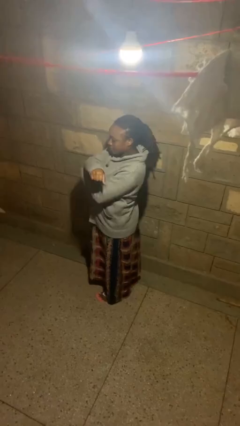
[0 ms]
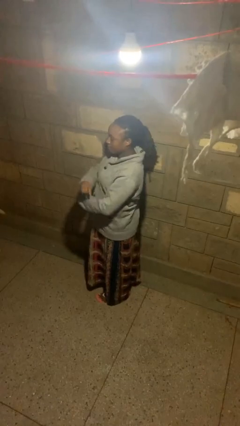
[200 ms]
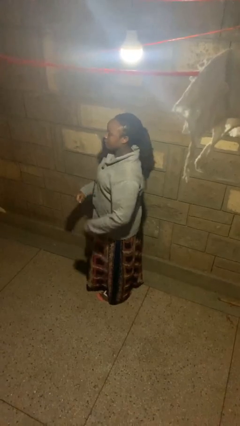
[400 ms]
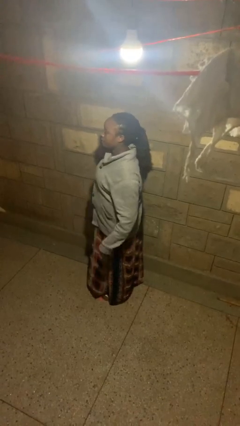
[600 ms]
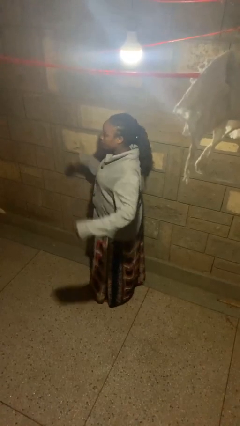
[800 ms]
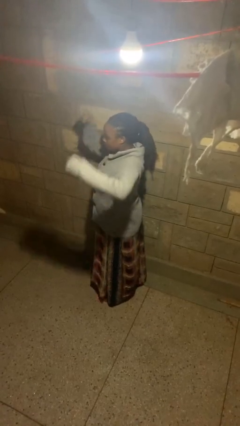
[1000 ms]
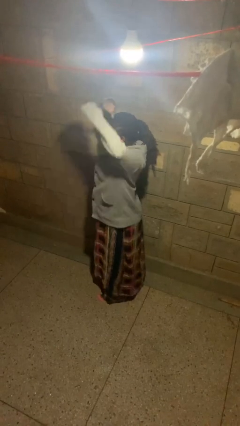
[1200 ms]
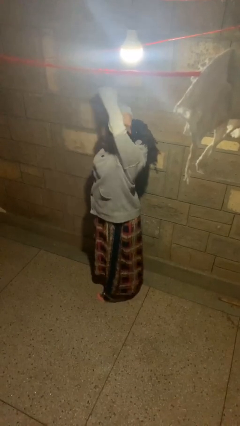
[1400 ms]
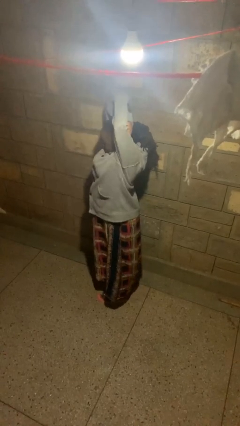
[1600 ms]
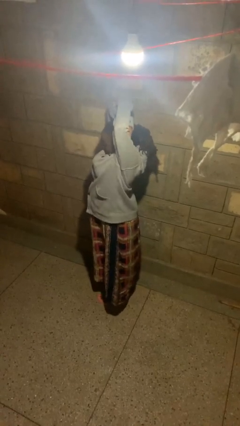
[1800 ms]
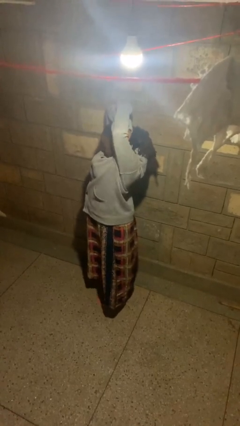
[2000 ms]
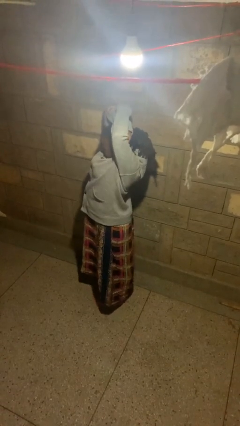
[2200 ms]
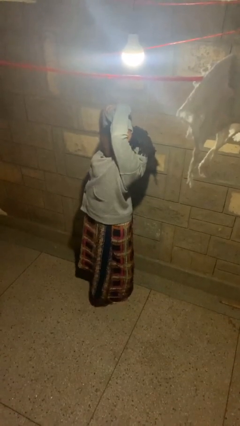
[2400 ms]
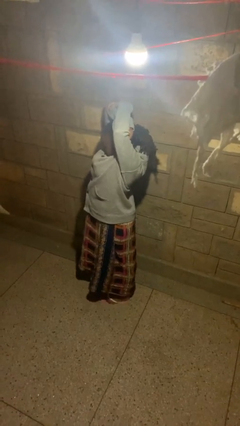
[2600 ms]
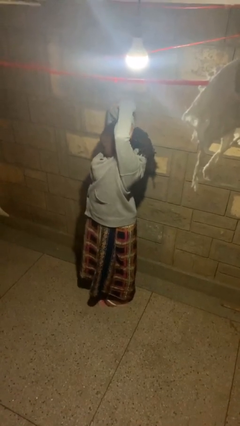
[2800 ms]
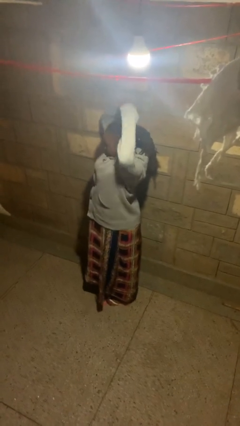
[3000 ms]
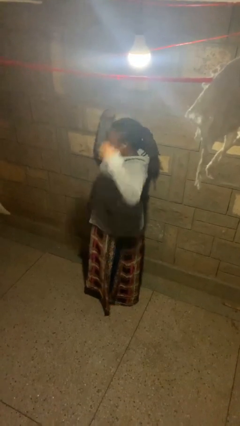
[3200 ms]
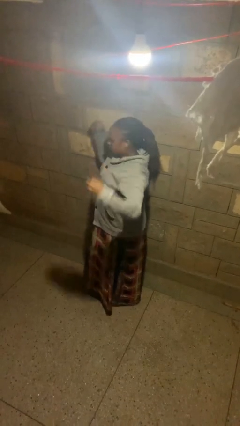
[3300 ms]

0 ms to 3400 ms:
person stretches arms over head

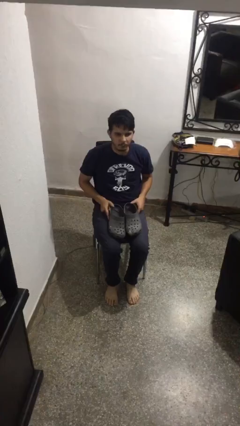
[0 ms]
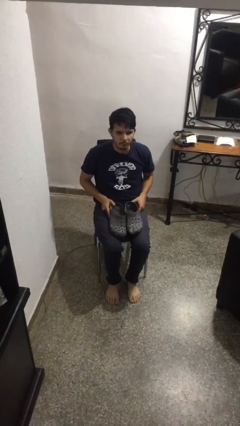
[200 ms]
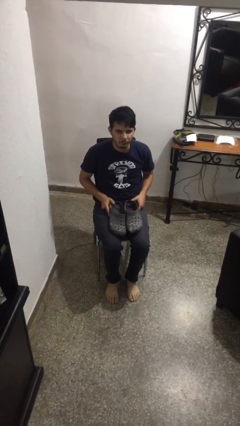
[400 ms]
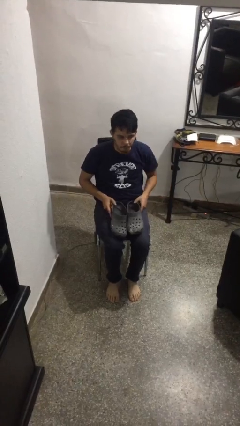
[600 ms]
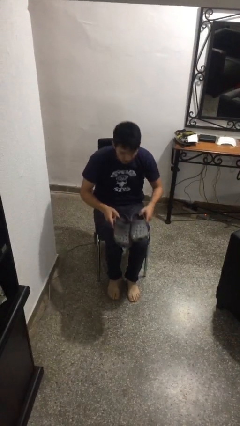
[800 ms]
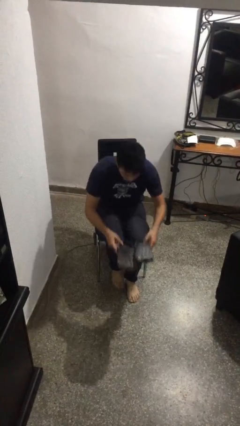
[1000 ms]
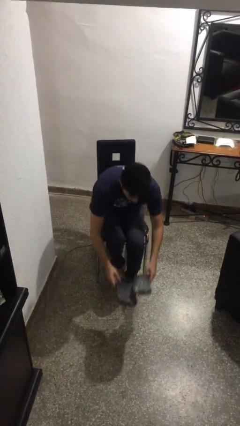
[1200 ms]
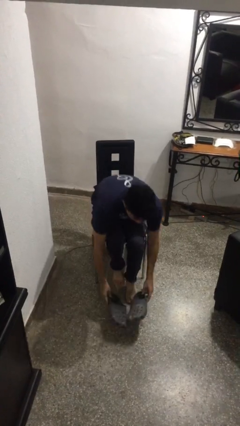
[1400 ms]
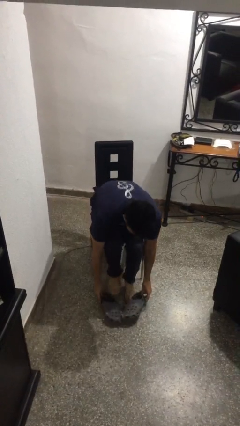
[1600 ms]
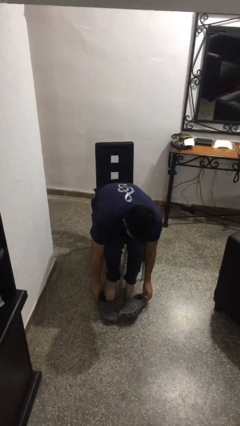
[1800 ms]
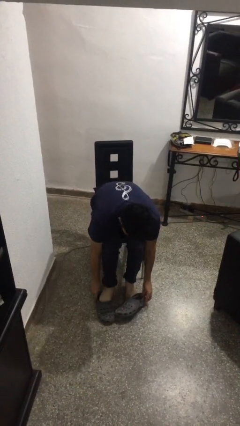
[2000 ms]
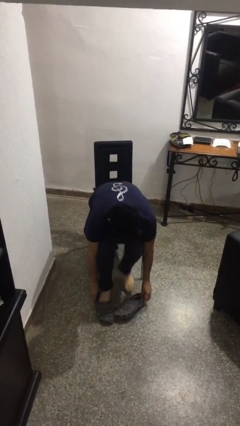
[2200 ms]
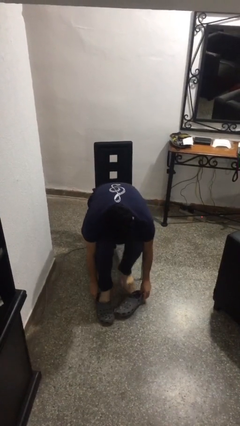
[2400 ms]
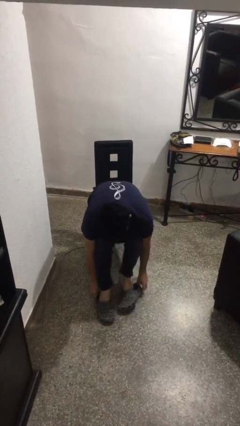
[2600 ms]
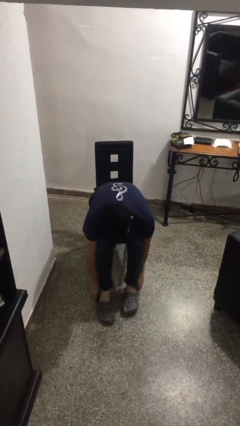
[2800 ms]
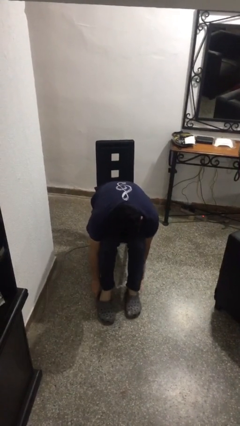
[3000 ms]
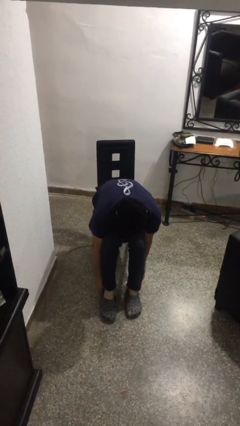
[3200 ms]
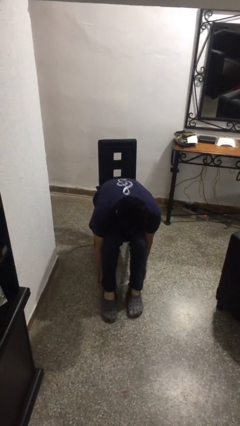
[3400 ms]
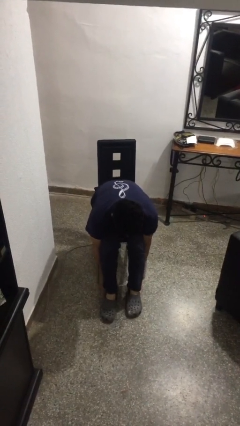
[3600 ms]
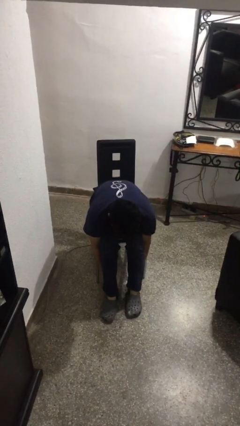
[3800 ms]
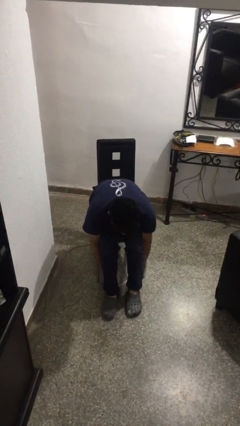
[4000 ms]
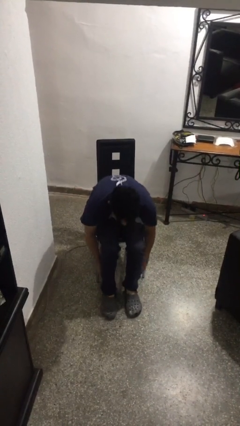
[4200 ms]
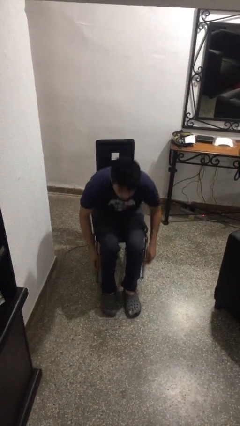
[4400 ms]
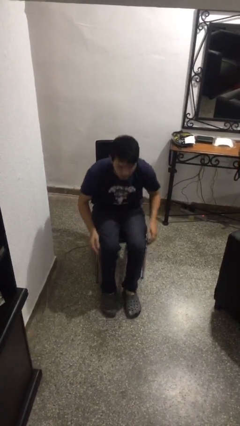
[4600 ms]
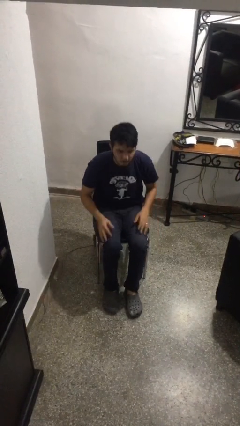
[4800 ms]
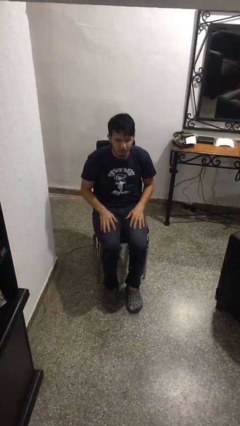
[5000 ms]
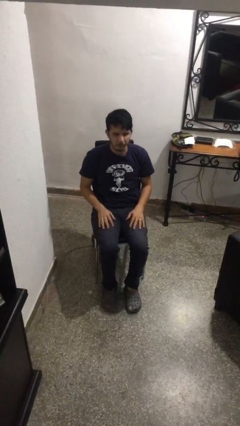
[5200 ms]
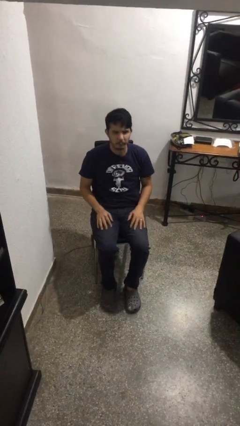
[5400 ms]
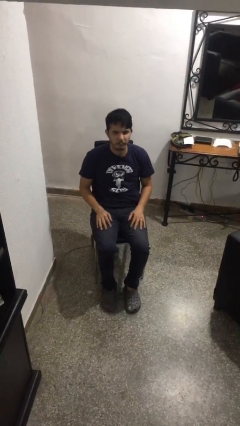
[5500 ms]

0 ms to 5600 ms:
person puts on shoes

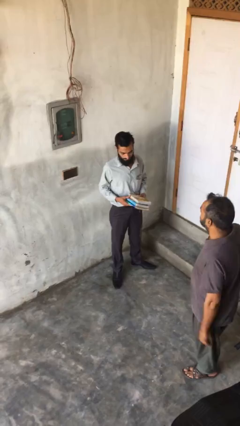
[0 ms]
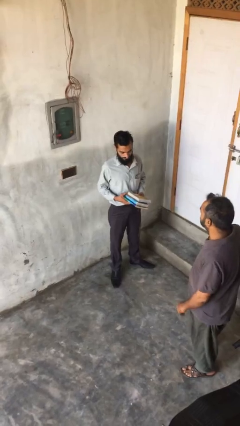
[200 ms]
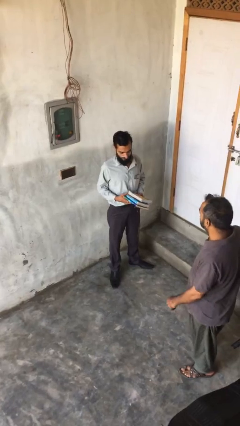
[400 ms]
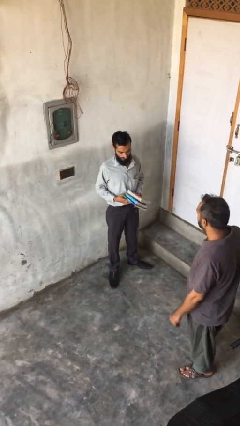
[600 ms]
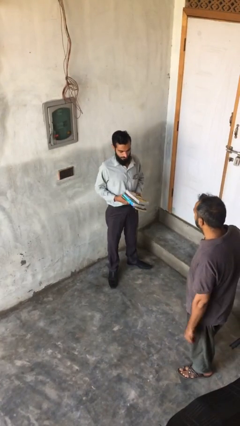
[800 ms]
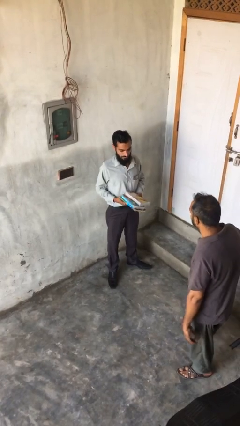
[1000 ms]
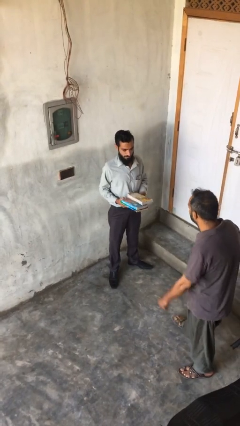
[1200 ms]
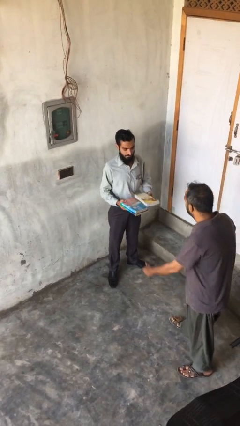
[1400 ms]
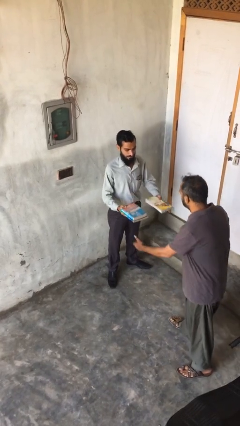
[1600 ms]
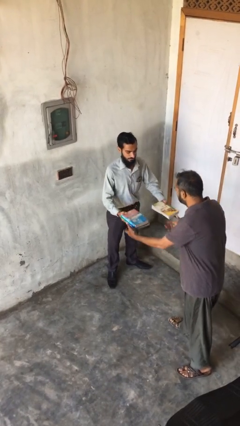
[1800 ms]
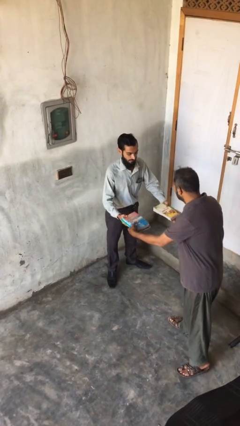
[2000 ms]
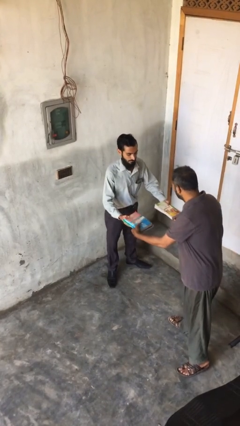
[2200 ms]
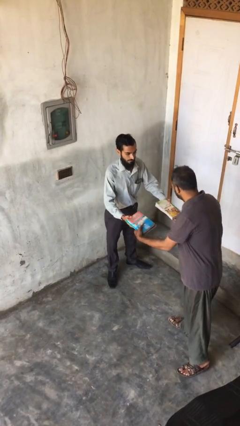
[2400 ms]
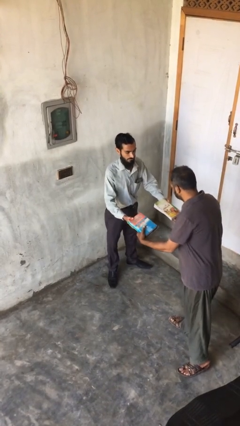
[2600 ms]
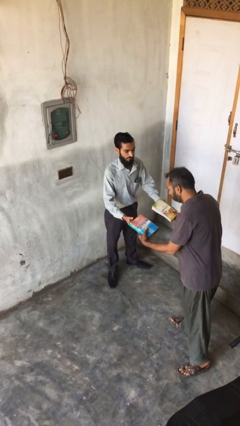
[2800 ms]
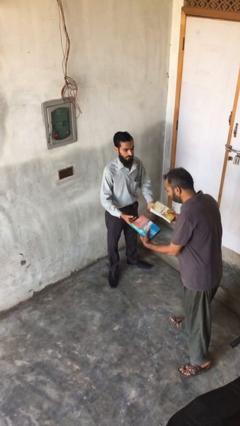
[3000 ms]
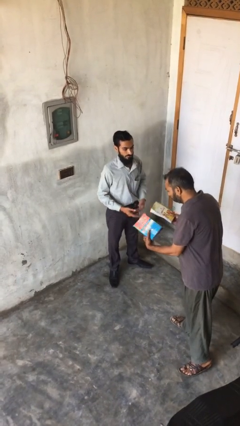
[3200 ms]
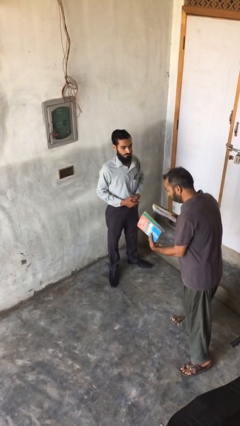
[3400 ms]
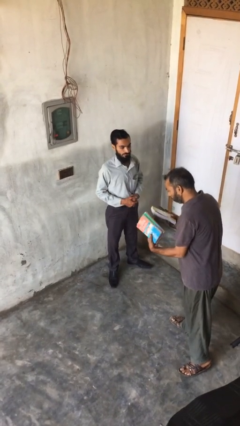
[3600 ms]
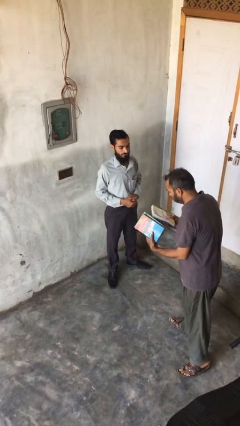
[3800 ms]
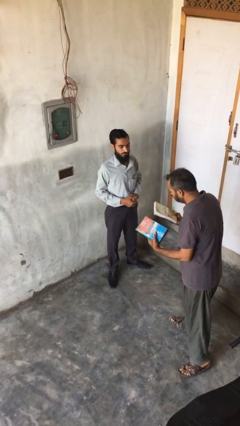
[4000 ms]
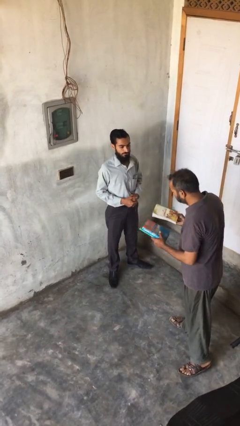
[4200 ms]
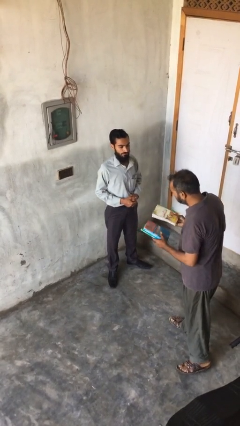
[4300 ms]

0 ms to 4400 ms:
person transfers object to person

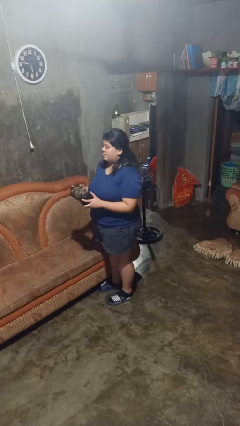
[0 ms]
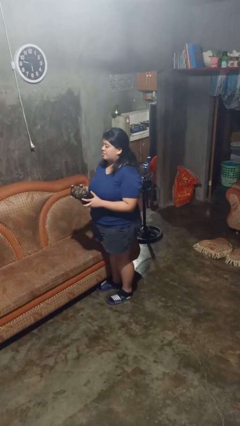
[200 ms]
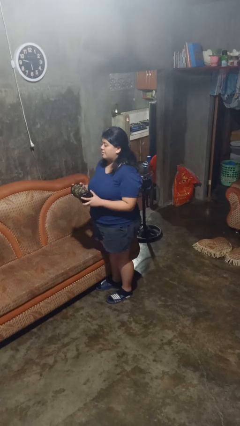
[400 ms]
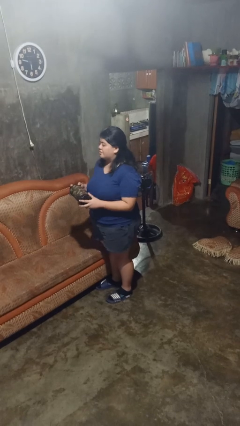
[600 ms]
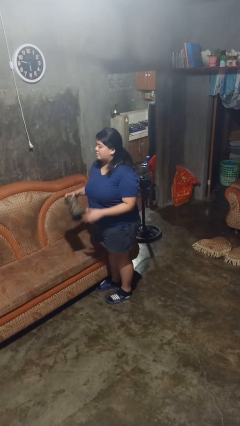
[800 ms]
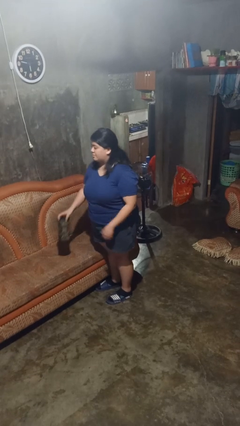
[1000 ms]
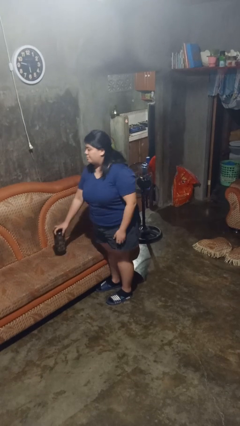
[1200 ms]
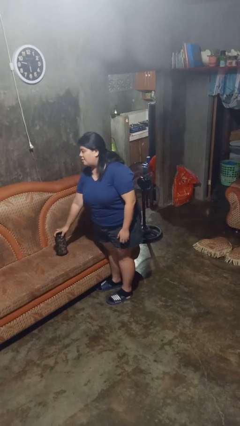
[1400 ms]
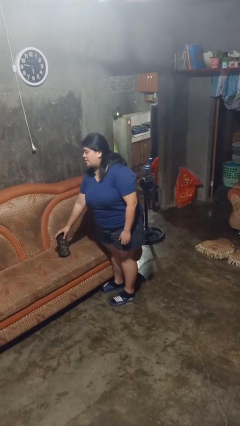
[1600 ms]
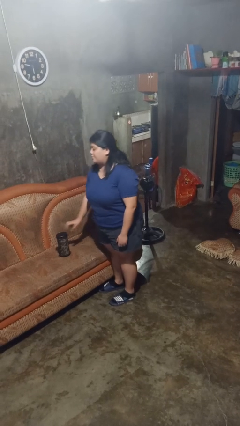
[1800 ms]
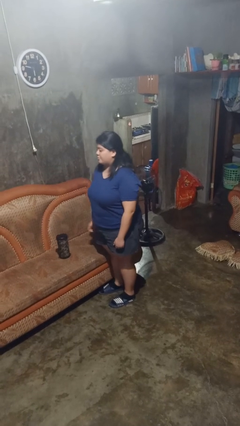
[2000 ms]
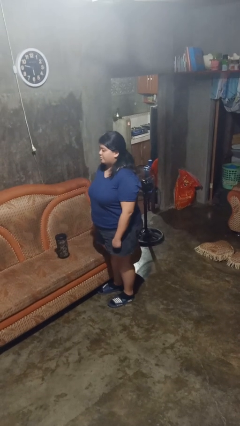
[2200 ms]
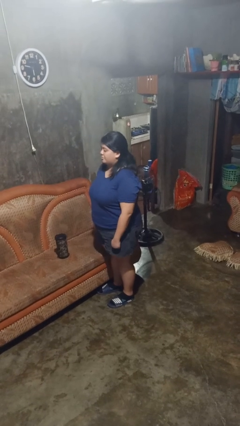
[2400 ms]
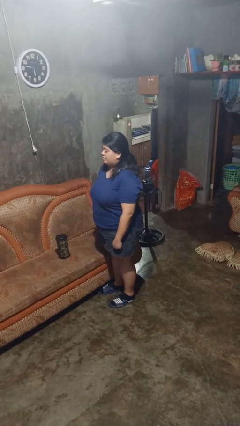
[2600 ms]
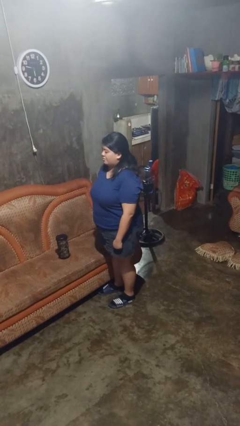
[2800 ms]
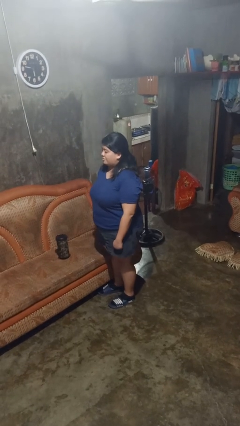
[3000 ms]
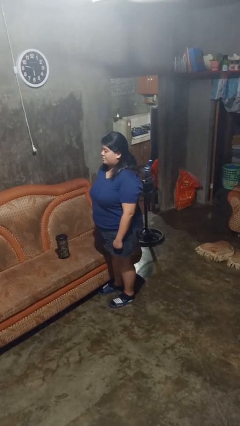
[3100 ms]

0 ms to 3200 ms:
person puts down object on couch

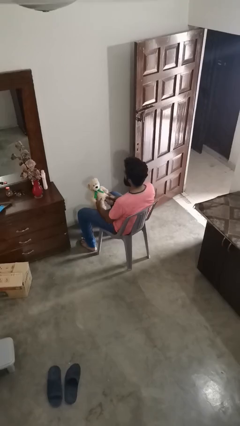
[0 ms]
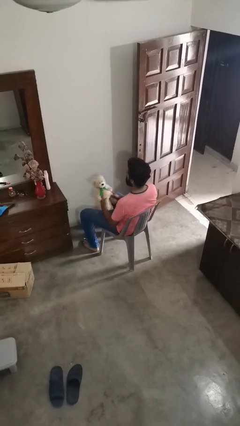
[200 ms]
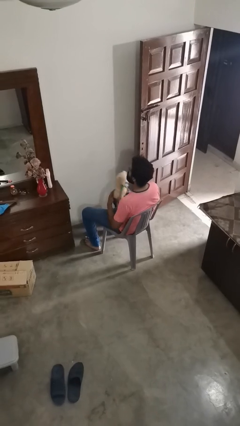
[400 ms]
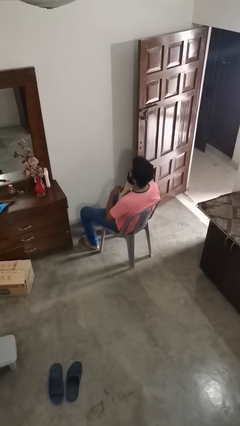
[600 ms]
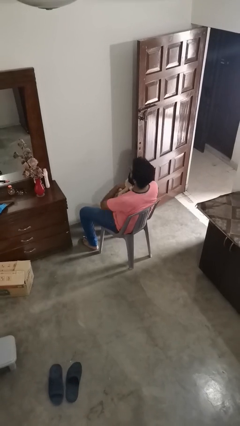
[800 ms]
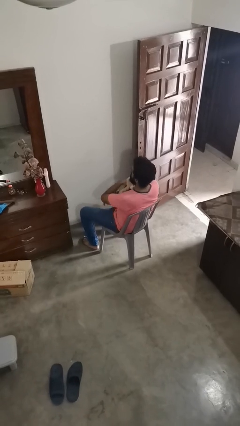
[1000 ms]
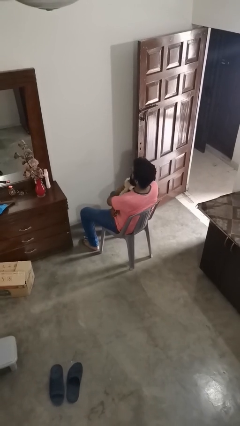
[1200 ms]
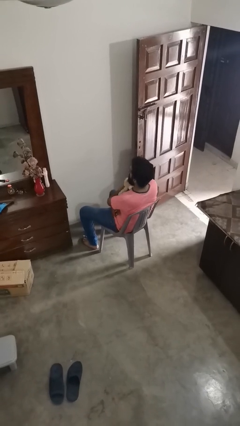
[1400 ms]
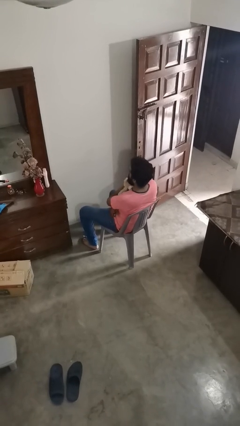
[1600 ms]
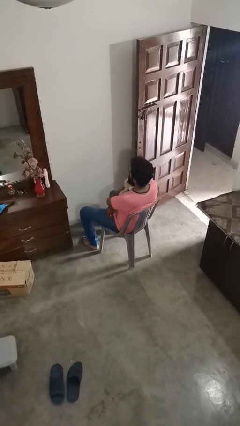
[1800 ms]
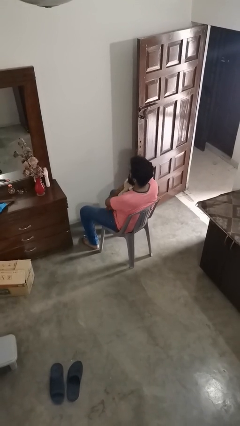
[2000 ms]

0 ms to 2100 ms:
person hugs stuffed animal
